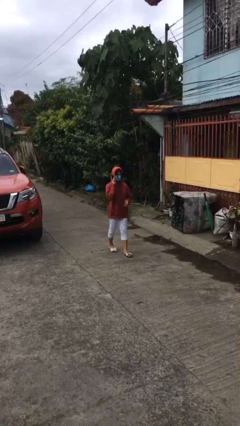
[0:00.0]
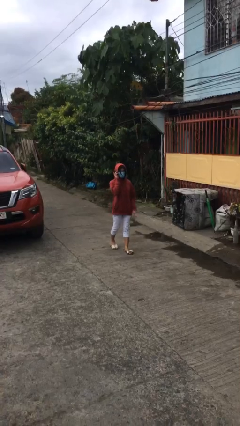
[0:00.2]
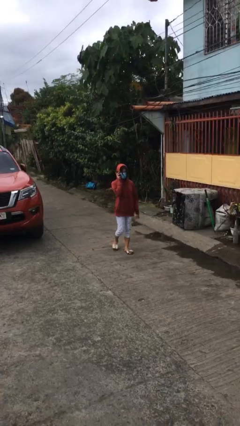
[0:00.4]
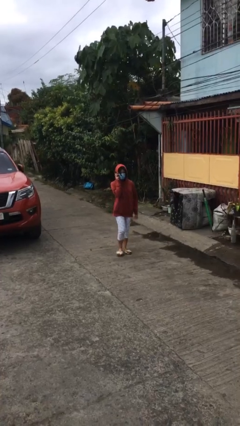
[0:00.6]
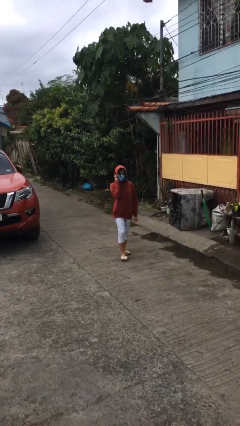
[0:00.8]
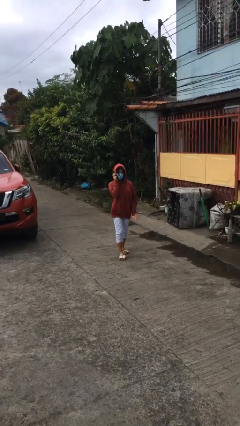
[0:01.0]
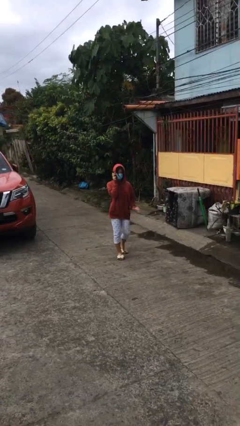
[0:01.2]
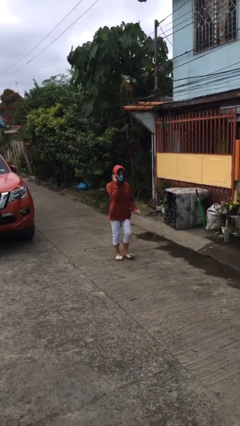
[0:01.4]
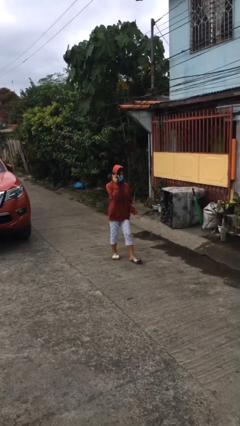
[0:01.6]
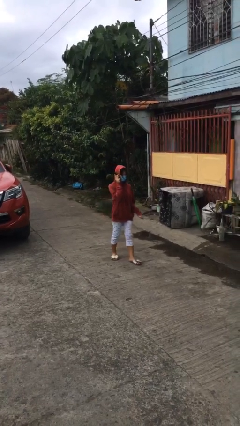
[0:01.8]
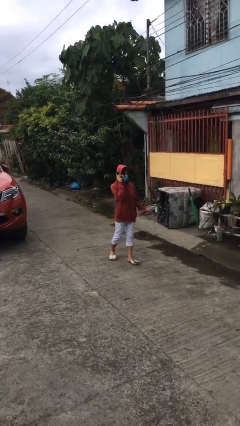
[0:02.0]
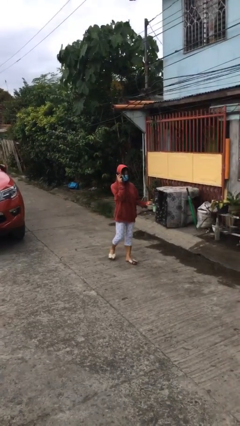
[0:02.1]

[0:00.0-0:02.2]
person talks on phone

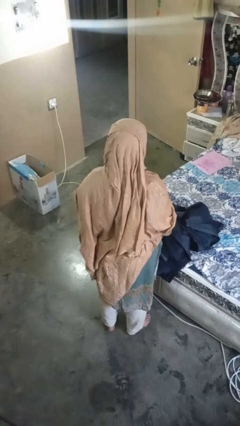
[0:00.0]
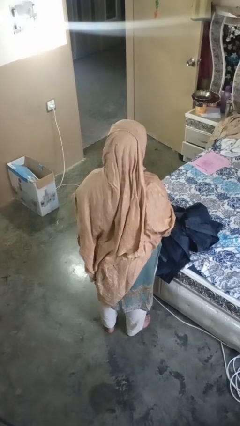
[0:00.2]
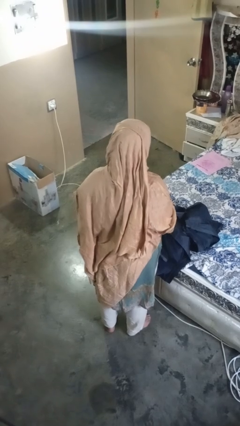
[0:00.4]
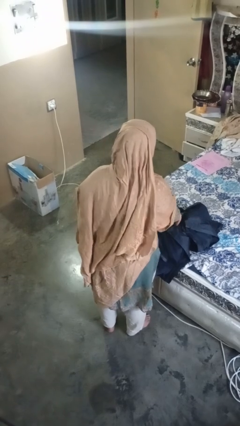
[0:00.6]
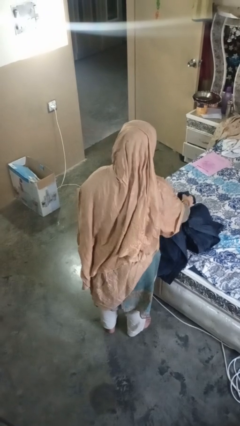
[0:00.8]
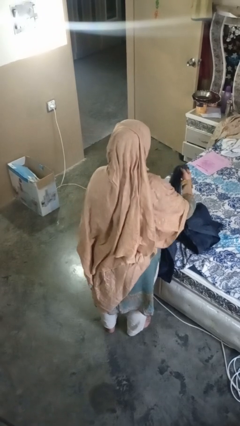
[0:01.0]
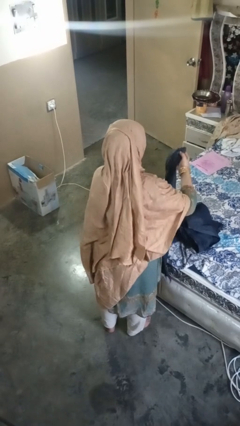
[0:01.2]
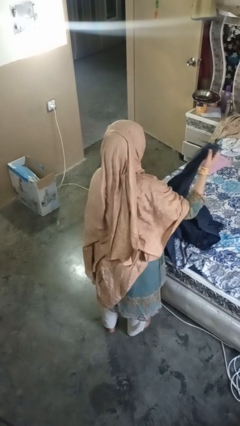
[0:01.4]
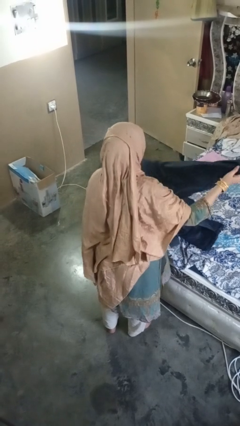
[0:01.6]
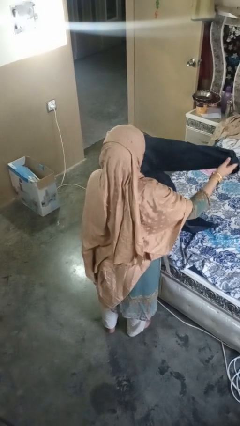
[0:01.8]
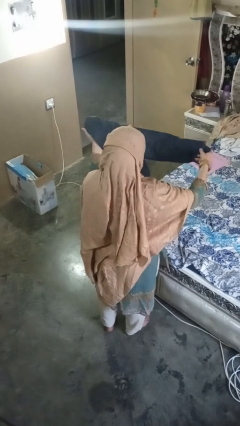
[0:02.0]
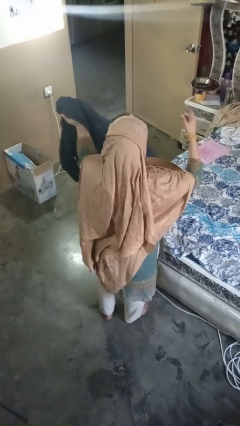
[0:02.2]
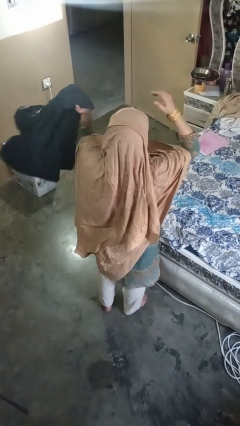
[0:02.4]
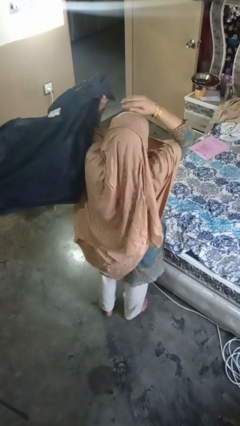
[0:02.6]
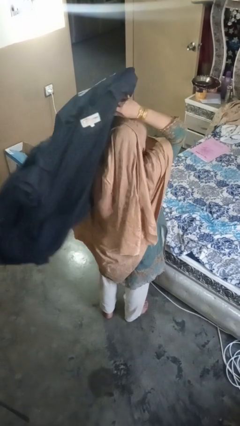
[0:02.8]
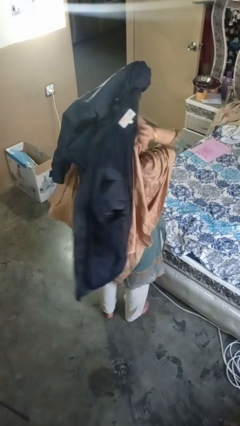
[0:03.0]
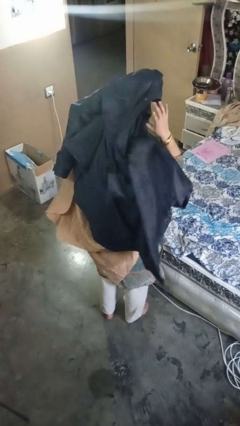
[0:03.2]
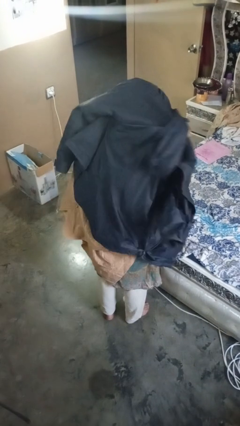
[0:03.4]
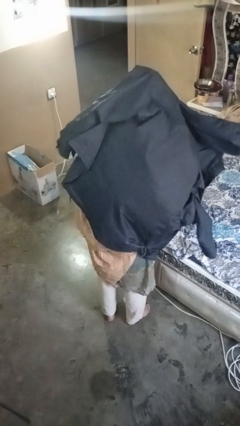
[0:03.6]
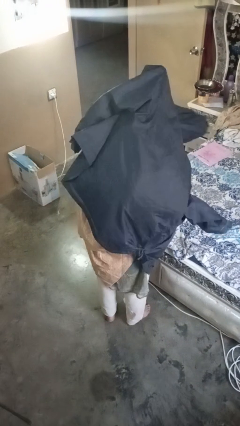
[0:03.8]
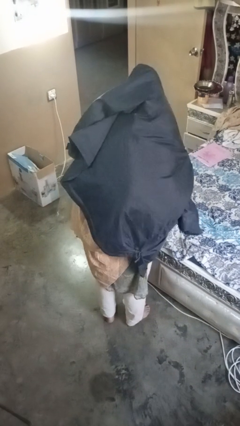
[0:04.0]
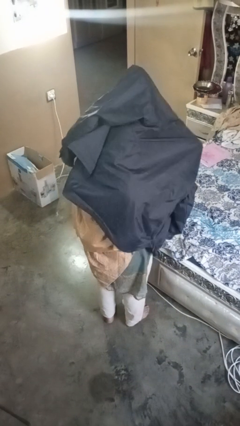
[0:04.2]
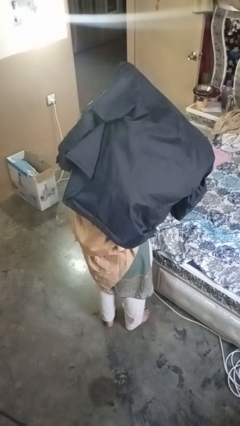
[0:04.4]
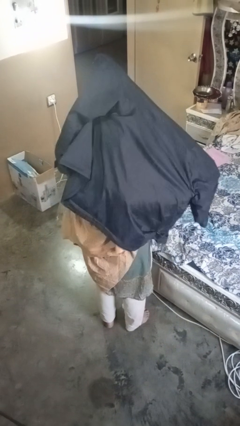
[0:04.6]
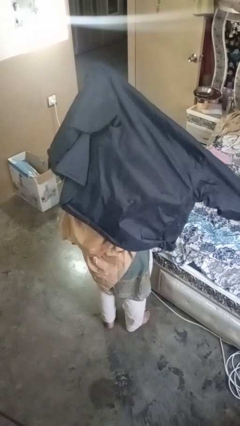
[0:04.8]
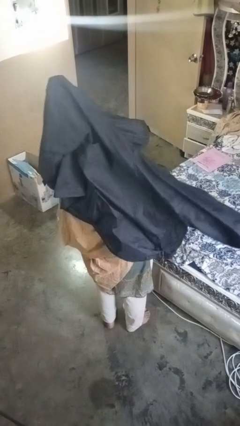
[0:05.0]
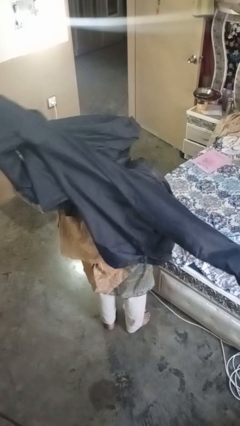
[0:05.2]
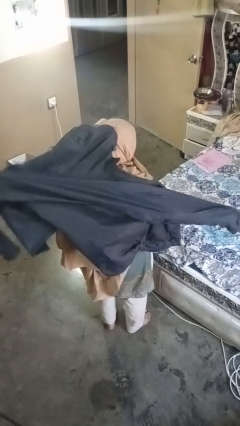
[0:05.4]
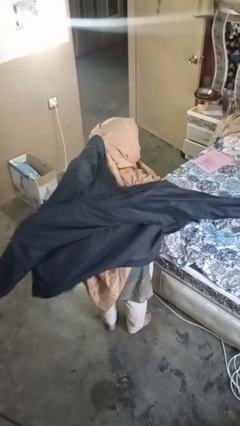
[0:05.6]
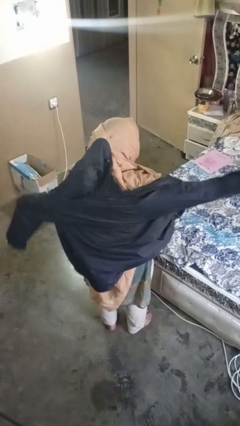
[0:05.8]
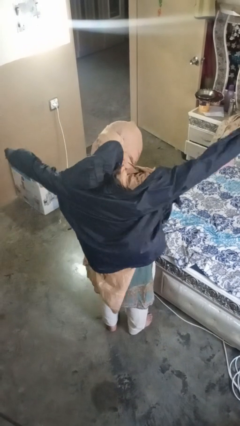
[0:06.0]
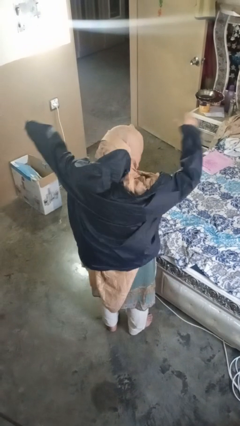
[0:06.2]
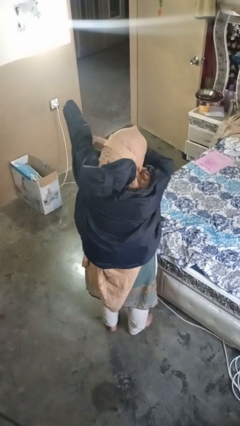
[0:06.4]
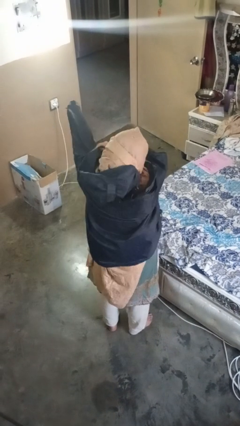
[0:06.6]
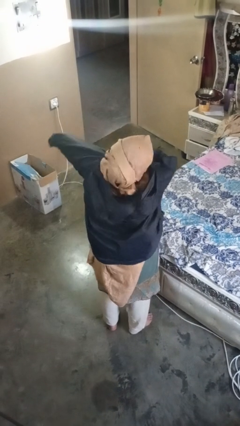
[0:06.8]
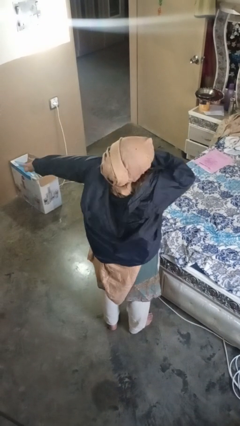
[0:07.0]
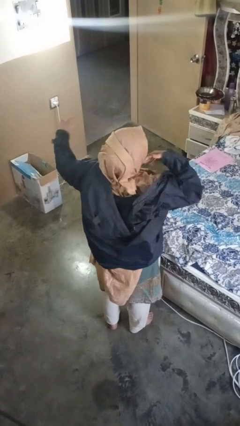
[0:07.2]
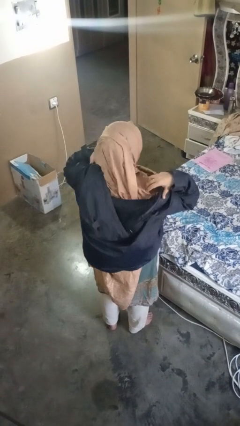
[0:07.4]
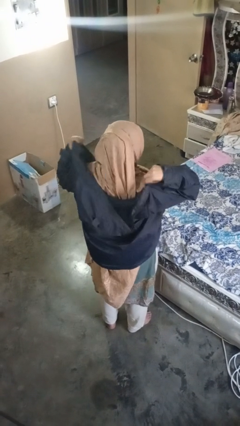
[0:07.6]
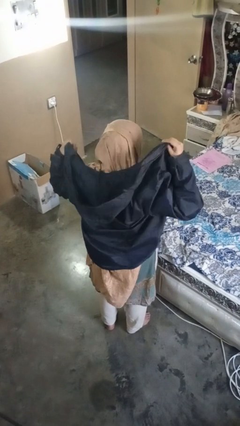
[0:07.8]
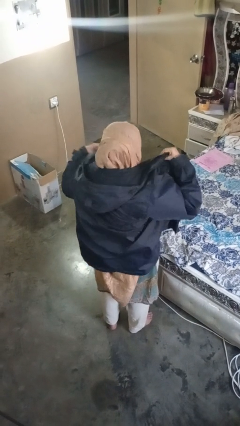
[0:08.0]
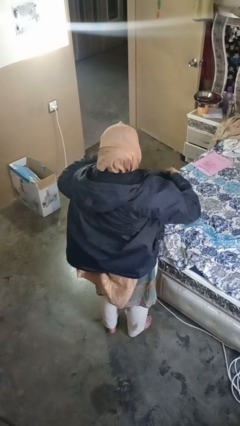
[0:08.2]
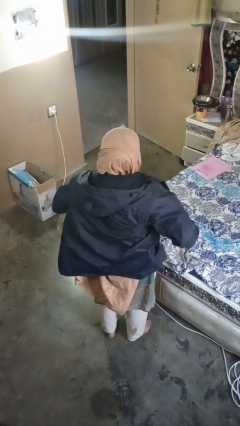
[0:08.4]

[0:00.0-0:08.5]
person puts on jacket

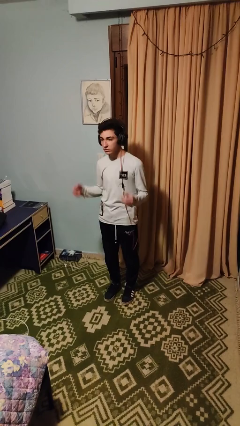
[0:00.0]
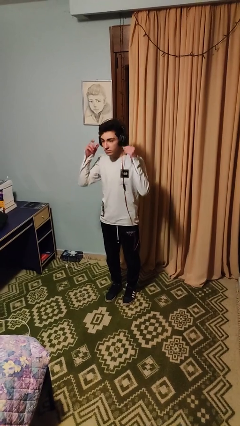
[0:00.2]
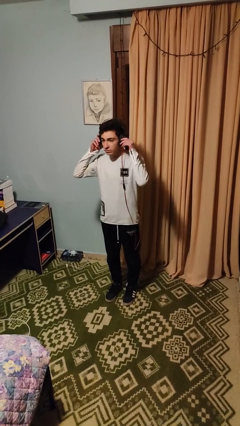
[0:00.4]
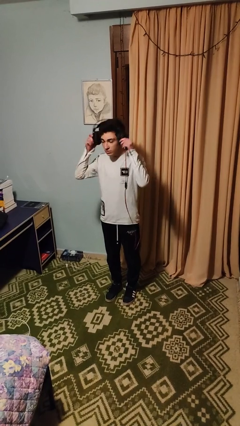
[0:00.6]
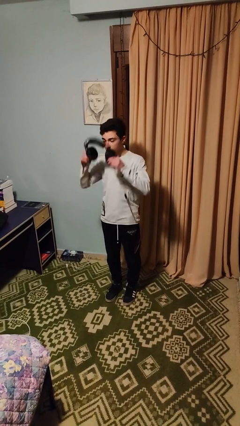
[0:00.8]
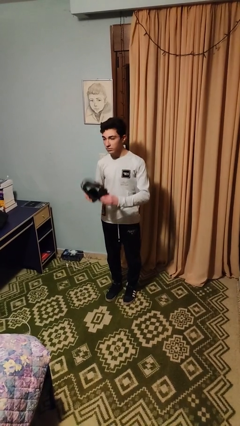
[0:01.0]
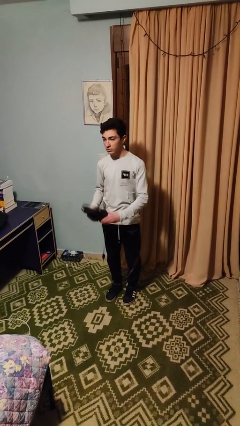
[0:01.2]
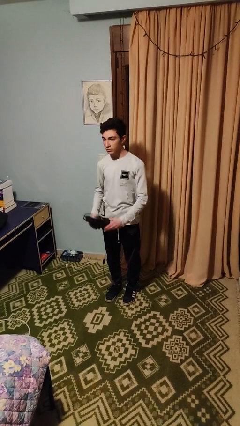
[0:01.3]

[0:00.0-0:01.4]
person takes off headphones

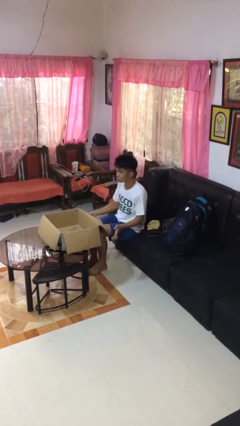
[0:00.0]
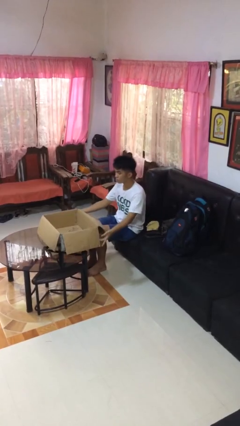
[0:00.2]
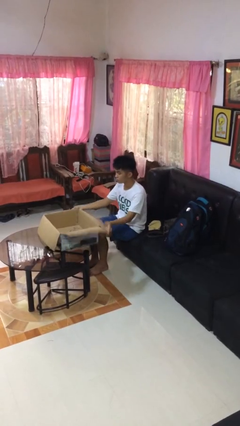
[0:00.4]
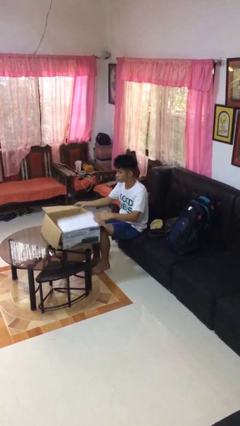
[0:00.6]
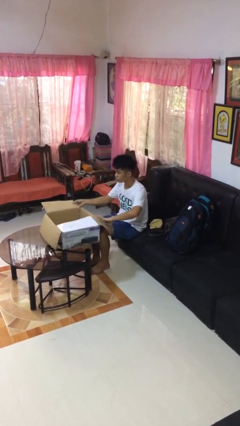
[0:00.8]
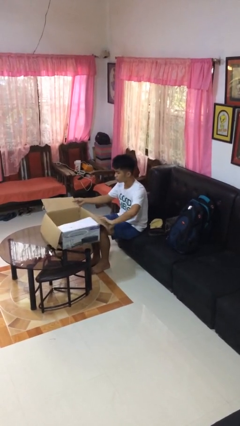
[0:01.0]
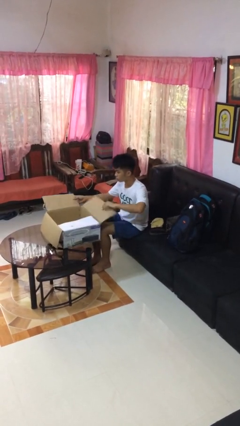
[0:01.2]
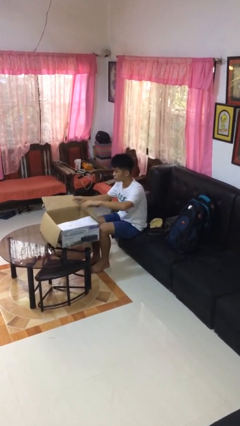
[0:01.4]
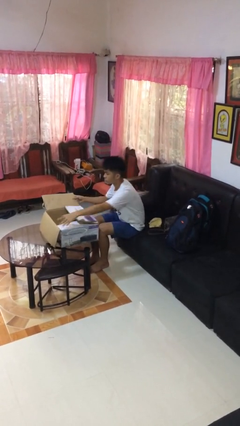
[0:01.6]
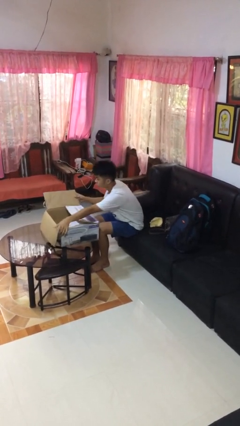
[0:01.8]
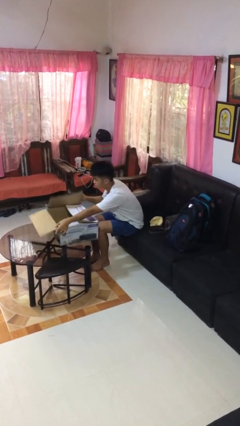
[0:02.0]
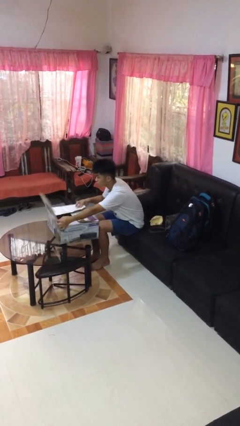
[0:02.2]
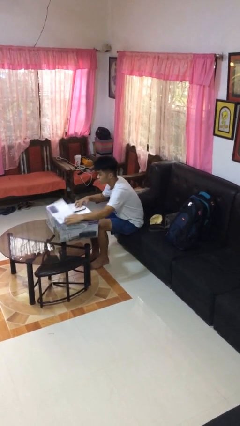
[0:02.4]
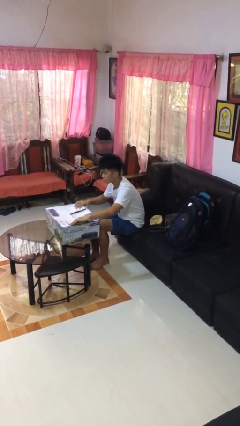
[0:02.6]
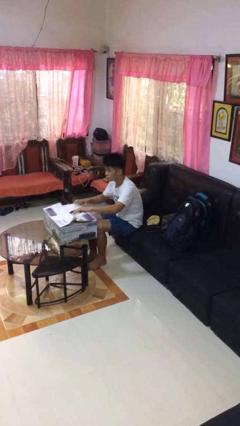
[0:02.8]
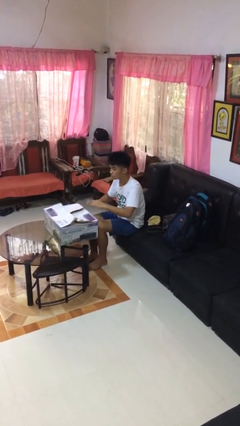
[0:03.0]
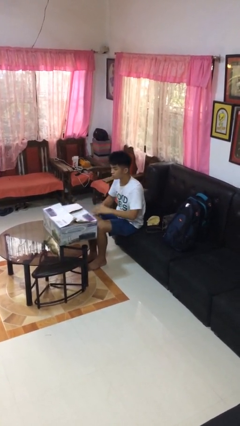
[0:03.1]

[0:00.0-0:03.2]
person closes box

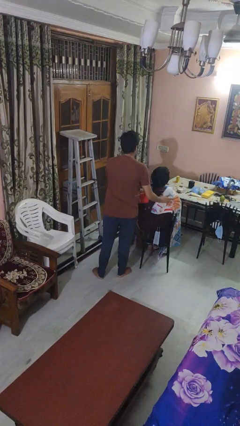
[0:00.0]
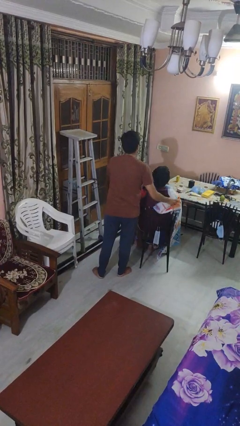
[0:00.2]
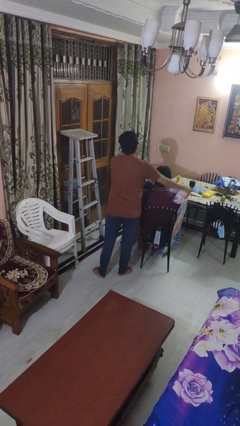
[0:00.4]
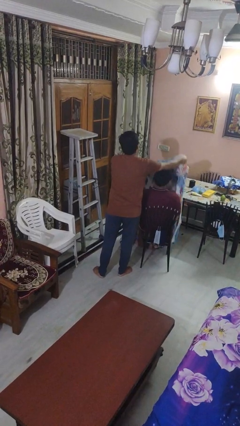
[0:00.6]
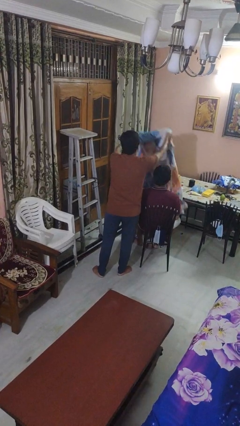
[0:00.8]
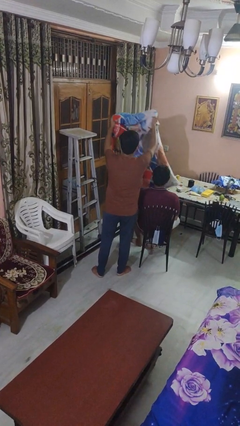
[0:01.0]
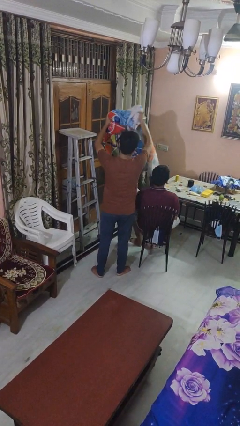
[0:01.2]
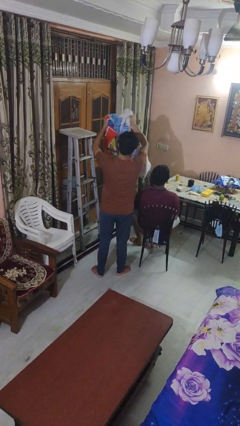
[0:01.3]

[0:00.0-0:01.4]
person uncovers friend with blanket

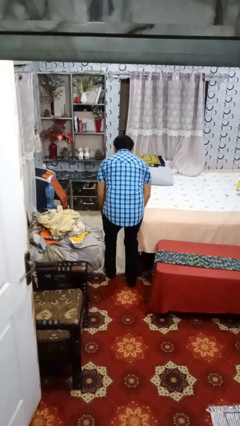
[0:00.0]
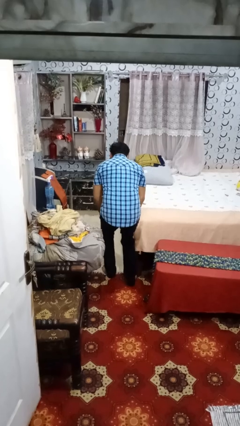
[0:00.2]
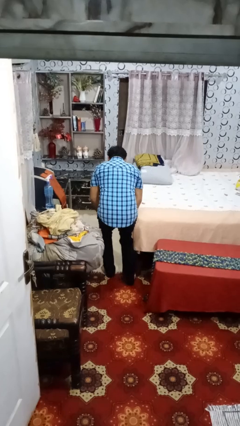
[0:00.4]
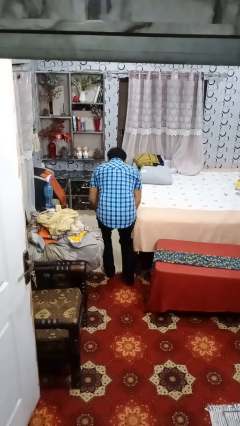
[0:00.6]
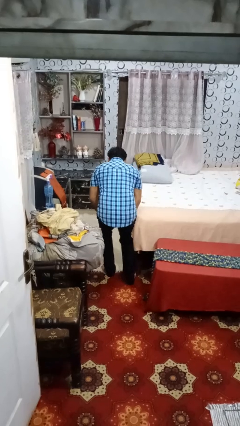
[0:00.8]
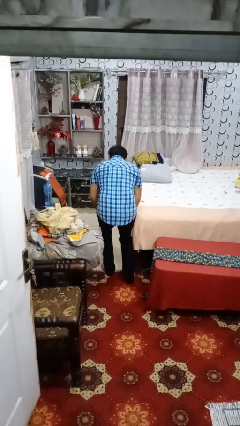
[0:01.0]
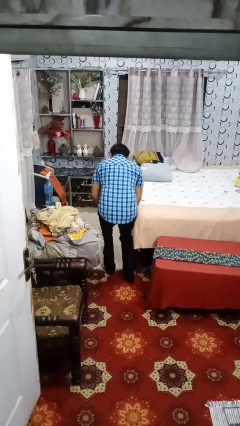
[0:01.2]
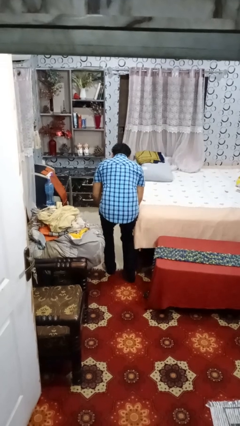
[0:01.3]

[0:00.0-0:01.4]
person stubs toe
